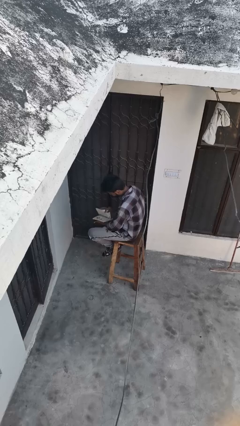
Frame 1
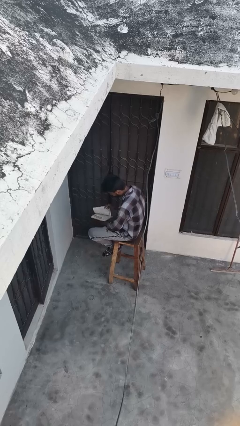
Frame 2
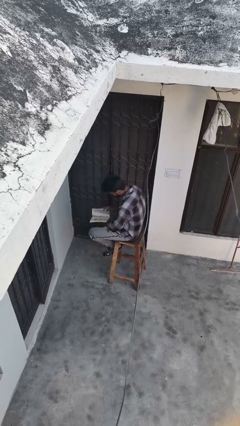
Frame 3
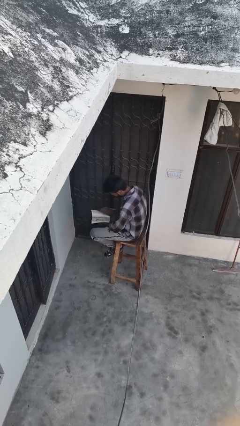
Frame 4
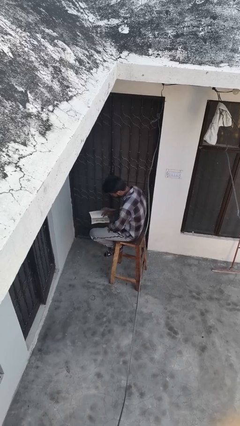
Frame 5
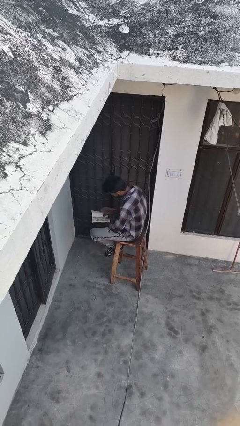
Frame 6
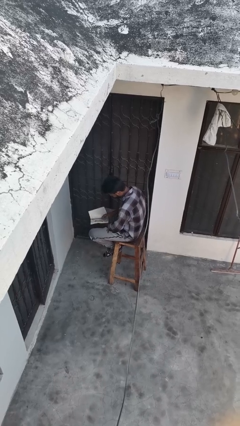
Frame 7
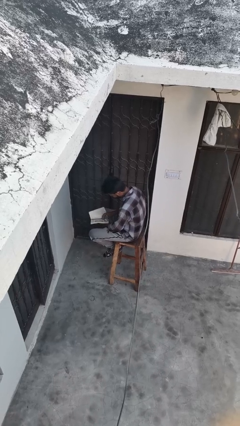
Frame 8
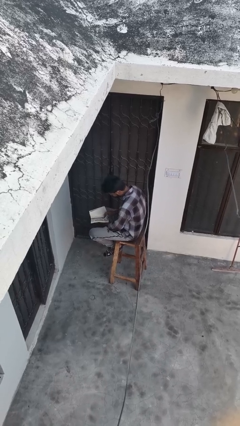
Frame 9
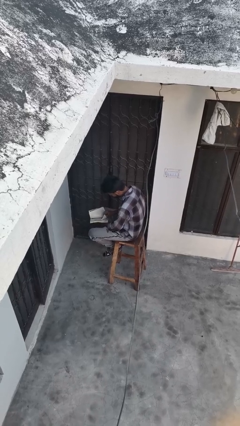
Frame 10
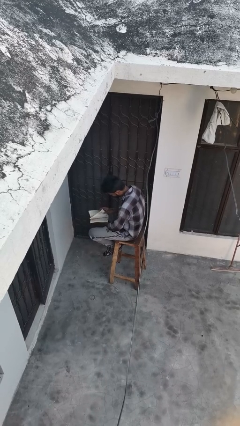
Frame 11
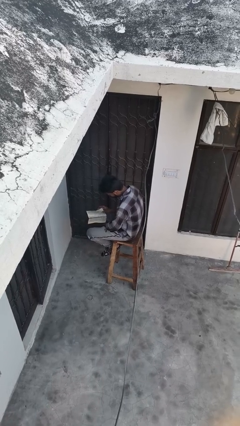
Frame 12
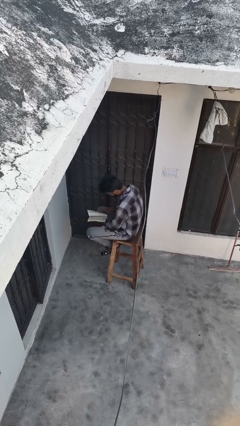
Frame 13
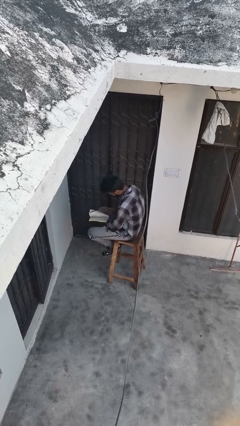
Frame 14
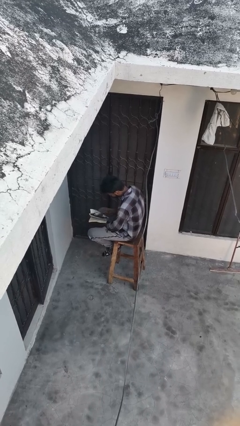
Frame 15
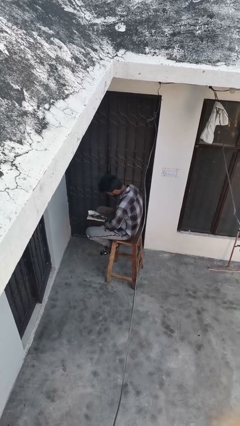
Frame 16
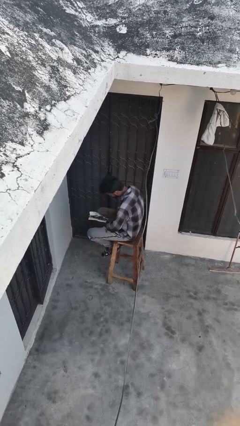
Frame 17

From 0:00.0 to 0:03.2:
person reads book

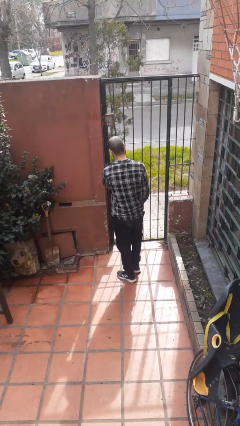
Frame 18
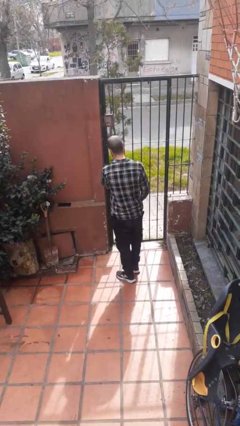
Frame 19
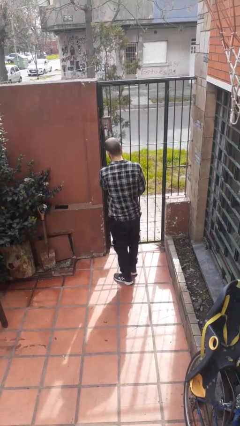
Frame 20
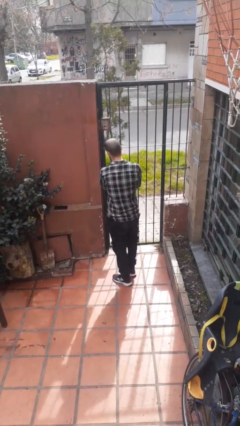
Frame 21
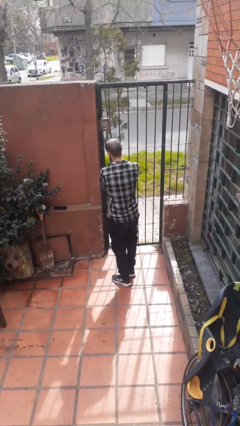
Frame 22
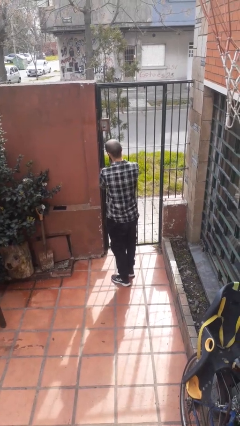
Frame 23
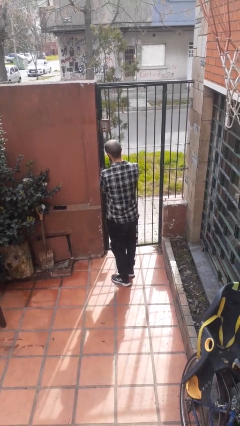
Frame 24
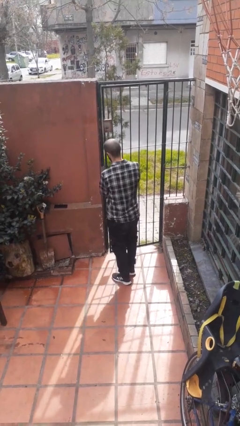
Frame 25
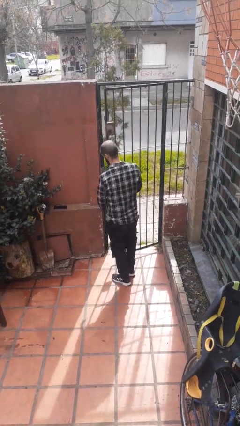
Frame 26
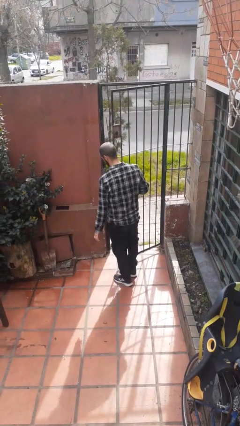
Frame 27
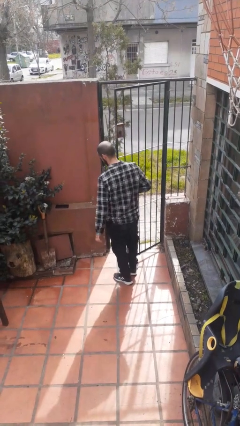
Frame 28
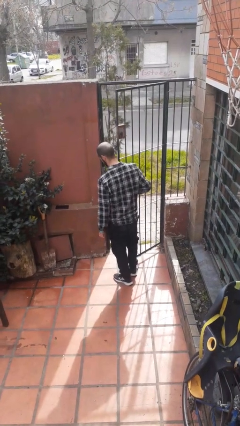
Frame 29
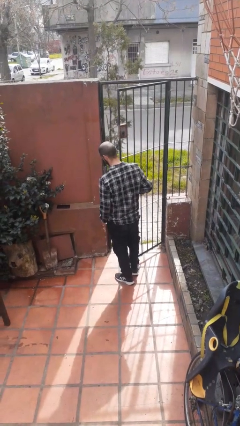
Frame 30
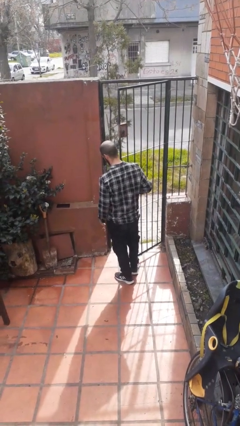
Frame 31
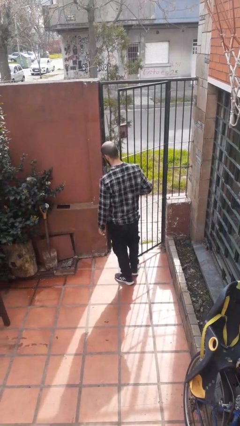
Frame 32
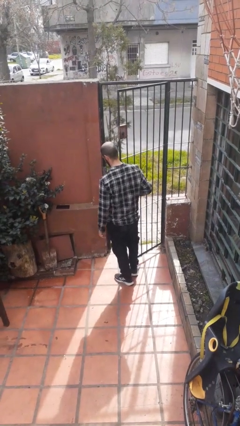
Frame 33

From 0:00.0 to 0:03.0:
person opens gate

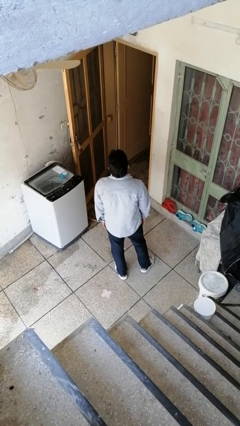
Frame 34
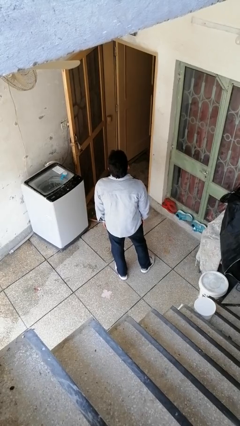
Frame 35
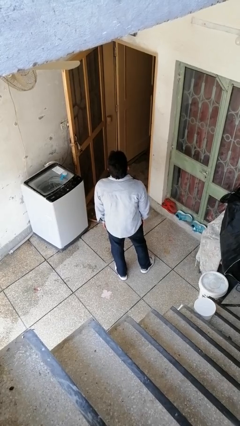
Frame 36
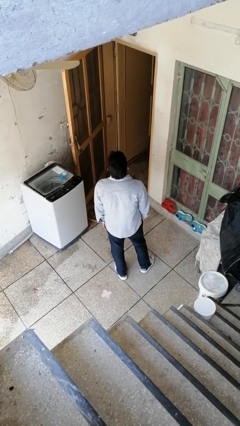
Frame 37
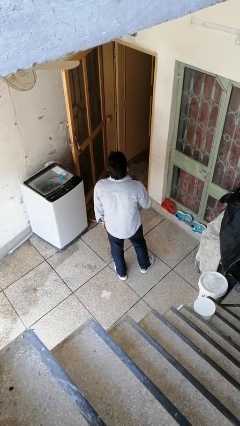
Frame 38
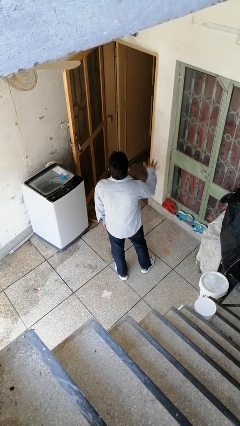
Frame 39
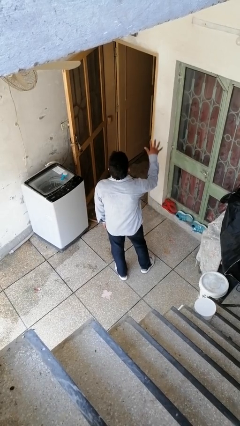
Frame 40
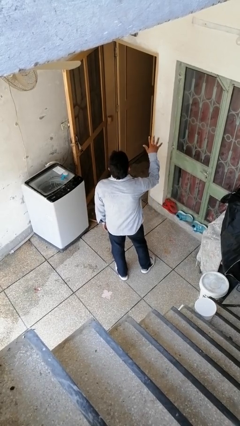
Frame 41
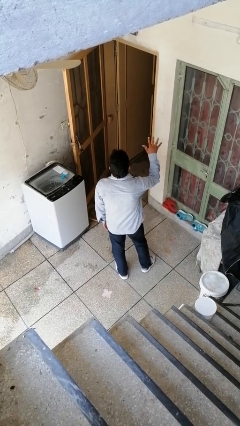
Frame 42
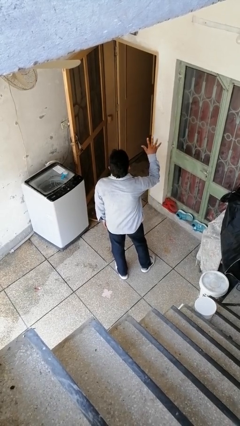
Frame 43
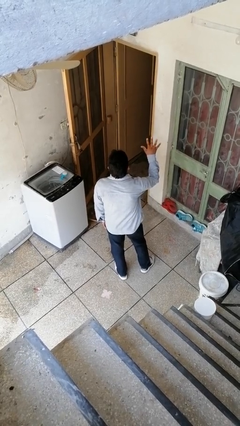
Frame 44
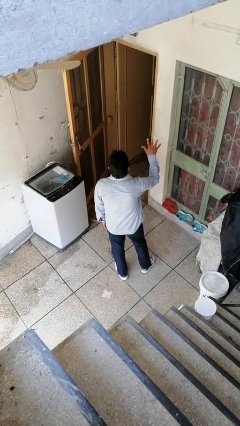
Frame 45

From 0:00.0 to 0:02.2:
person gestures number five

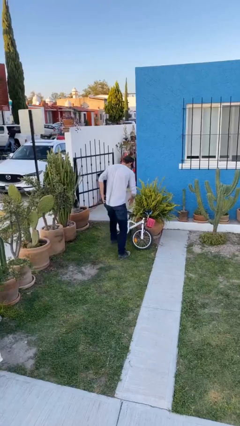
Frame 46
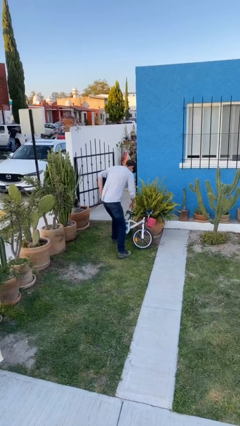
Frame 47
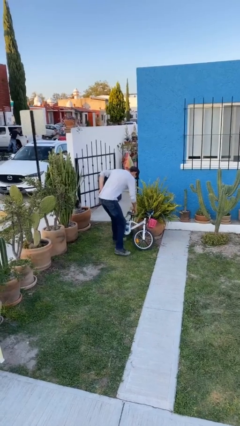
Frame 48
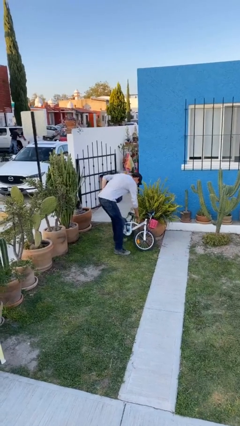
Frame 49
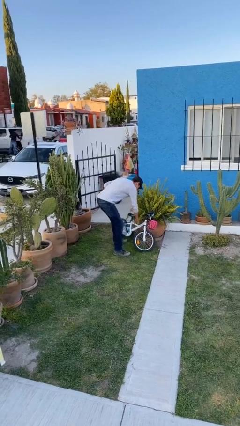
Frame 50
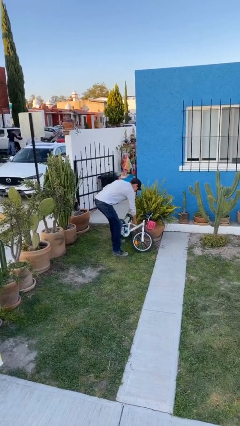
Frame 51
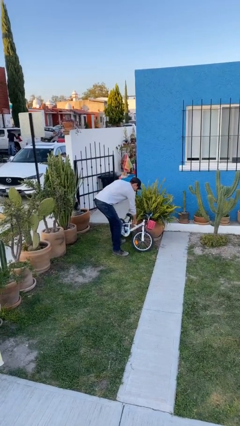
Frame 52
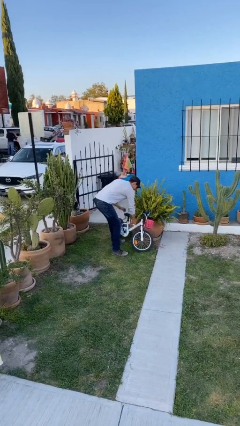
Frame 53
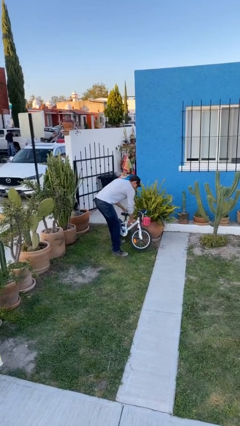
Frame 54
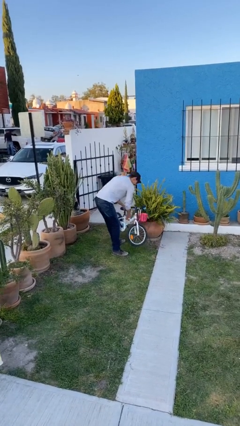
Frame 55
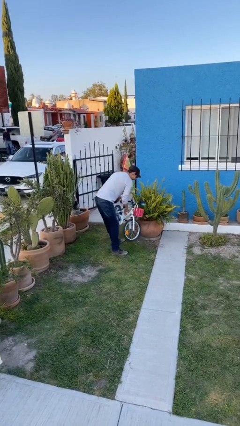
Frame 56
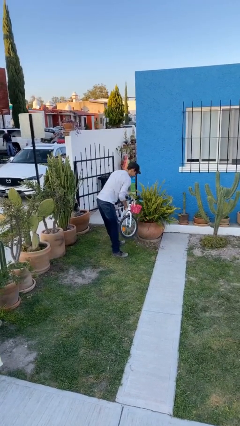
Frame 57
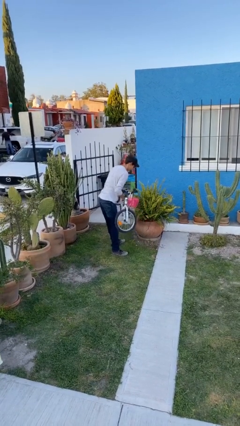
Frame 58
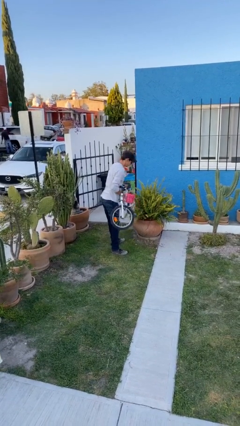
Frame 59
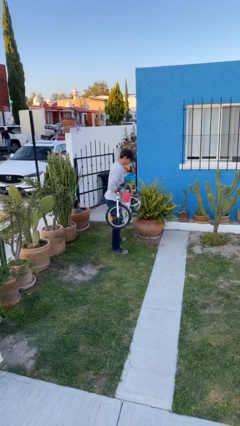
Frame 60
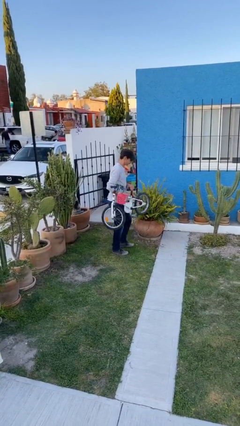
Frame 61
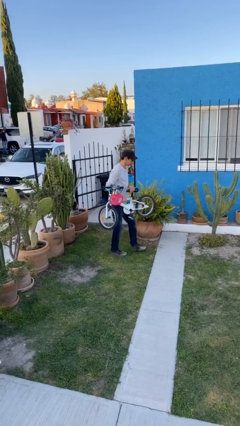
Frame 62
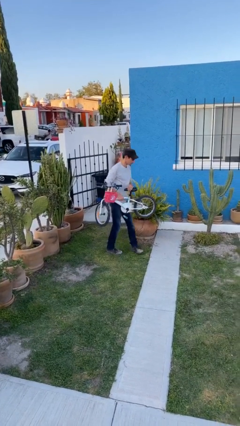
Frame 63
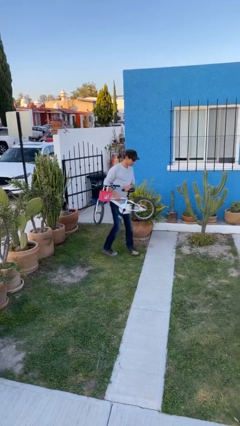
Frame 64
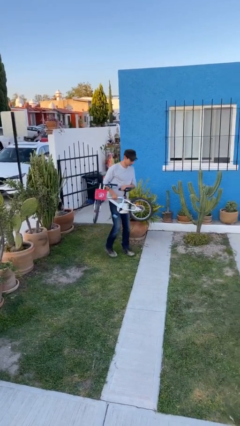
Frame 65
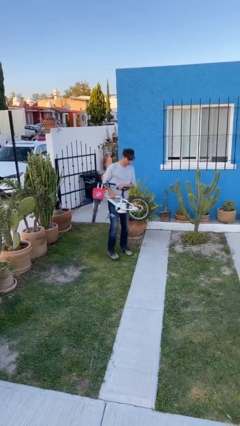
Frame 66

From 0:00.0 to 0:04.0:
person picks up object from floor

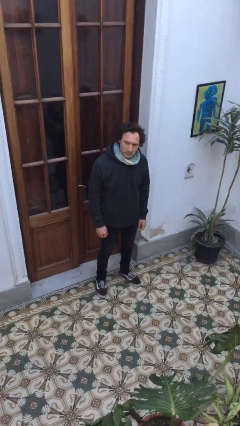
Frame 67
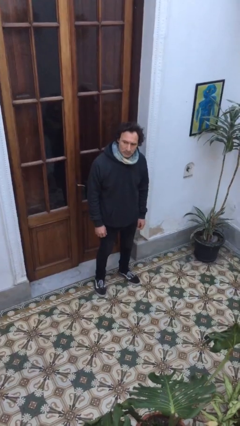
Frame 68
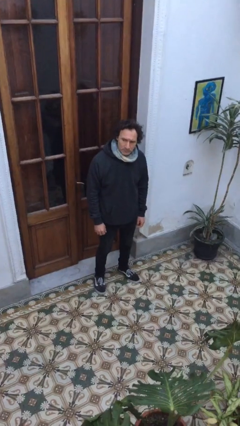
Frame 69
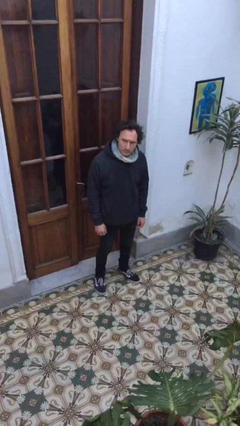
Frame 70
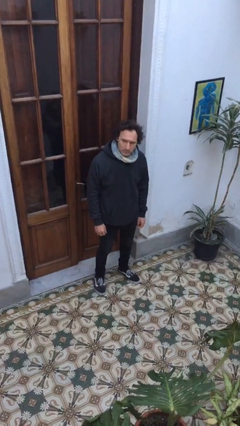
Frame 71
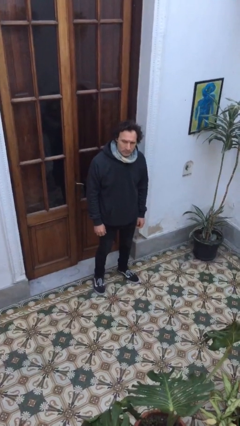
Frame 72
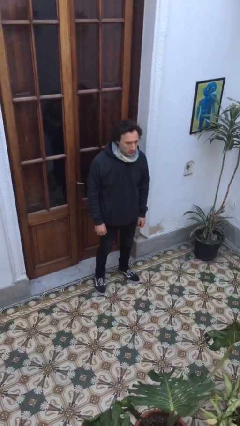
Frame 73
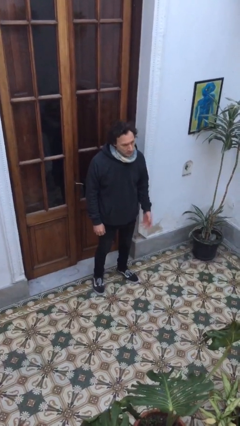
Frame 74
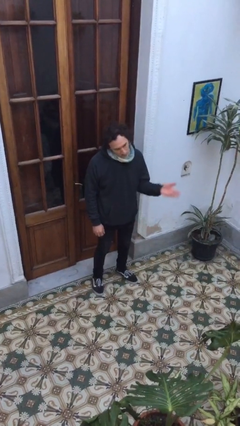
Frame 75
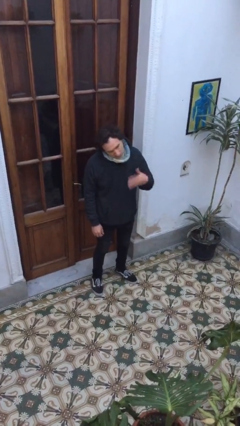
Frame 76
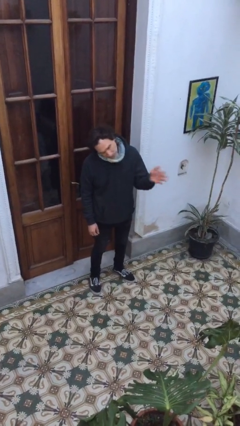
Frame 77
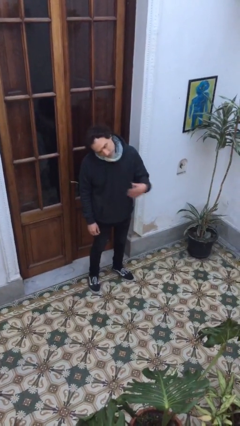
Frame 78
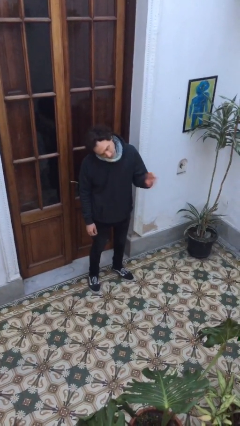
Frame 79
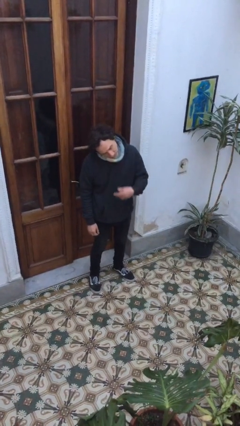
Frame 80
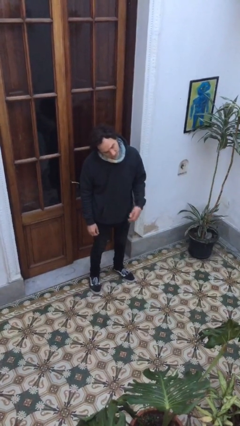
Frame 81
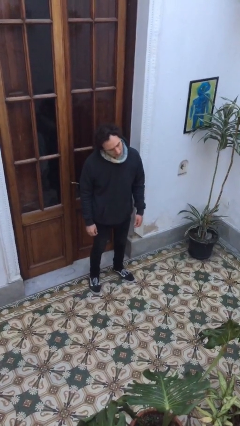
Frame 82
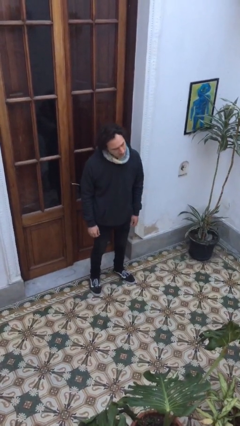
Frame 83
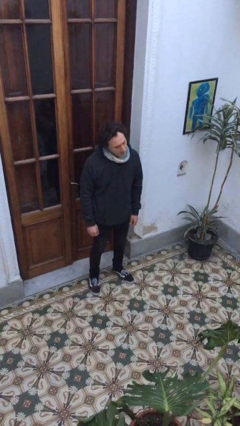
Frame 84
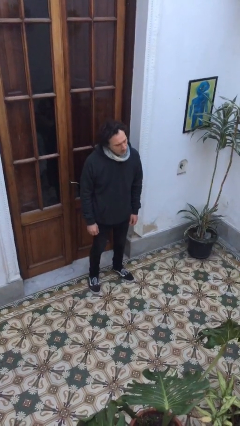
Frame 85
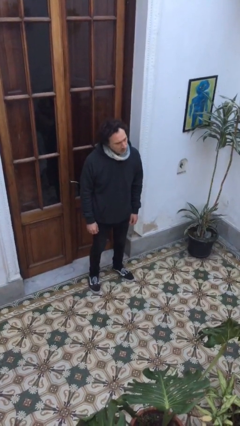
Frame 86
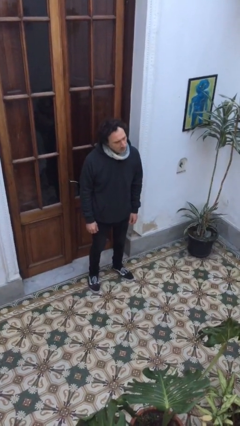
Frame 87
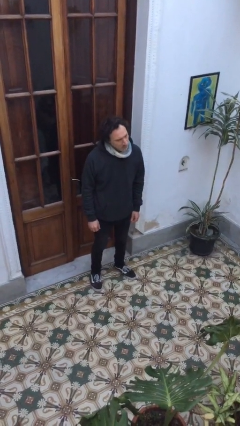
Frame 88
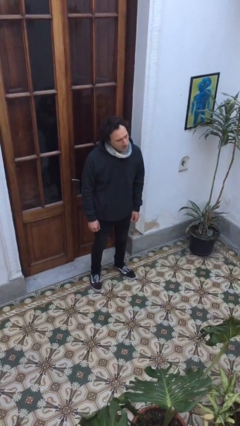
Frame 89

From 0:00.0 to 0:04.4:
person gestures come here

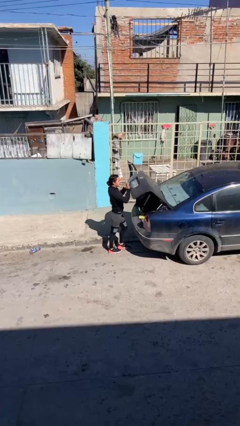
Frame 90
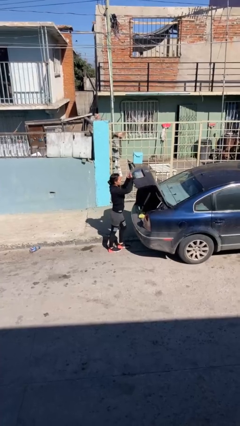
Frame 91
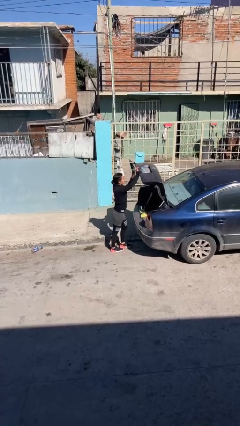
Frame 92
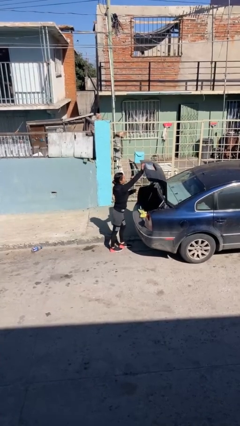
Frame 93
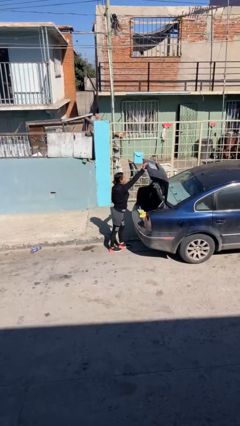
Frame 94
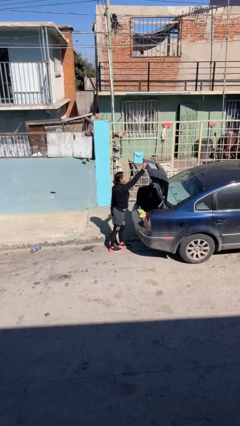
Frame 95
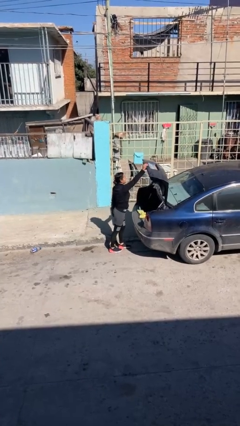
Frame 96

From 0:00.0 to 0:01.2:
person opens car trunk
